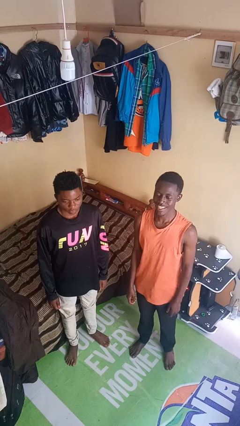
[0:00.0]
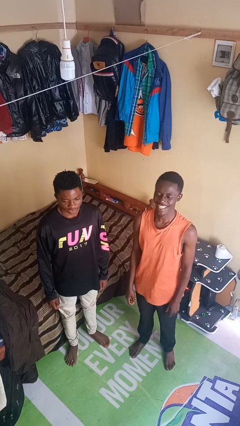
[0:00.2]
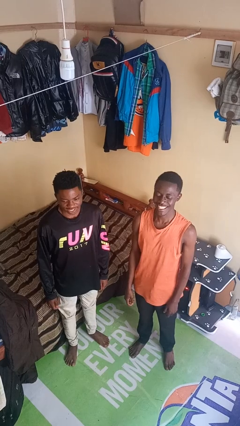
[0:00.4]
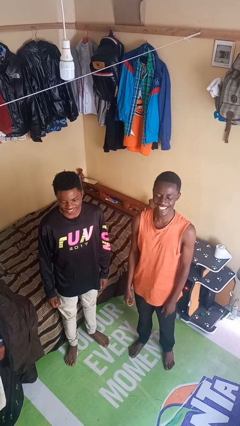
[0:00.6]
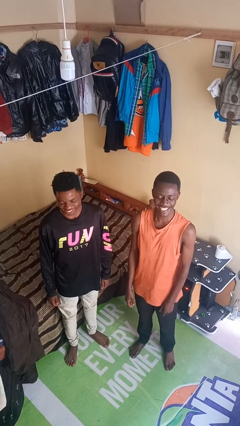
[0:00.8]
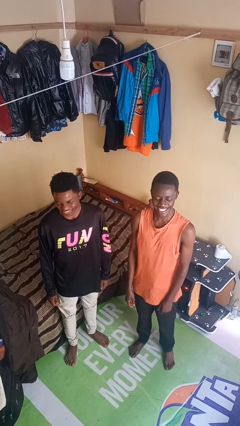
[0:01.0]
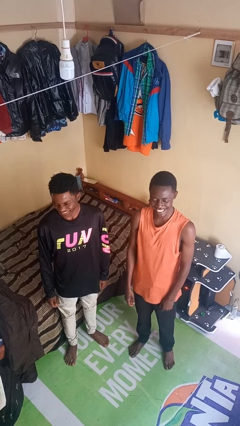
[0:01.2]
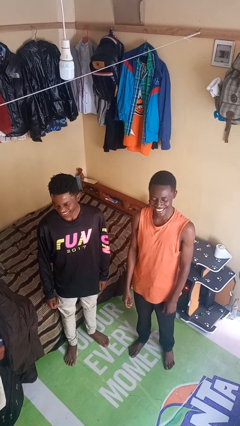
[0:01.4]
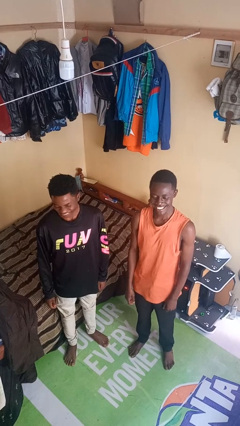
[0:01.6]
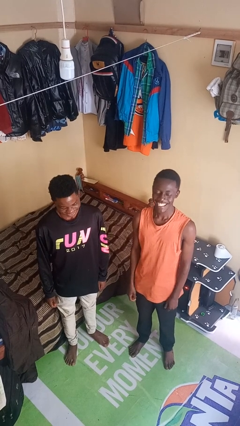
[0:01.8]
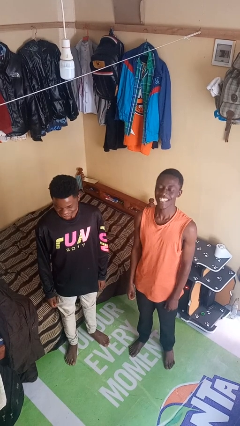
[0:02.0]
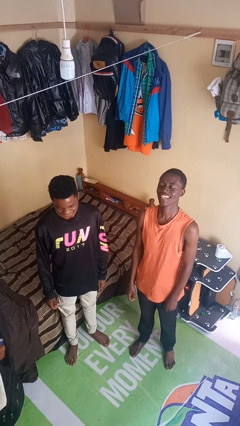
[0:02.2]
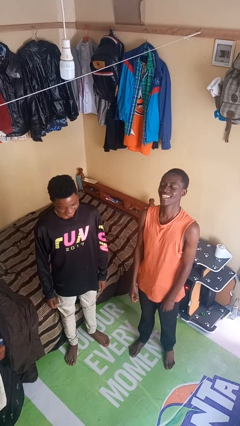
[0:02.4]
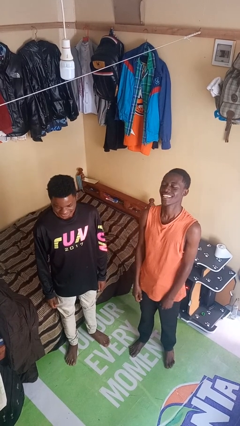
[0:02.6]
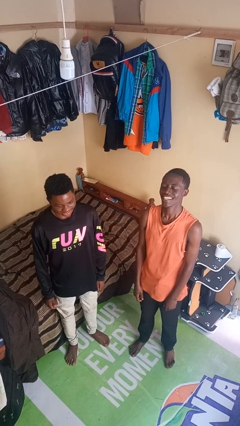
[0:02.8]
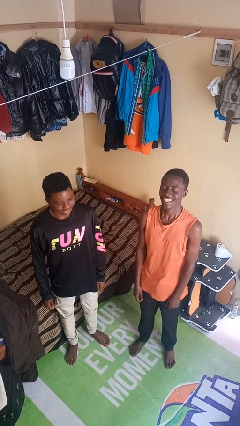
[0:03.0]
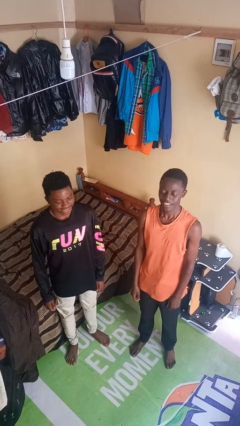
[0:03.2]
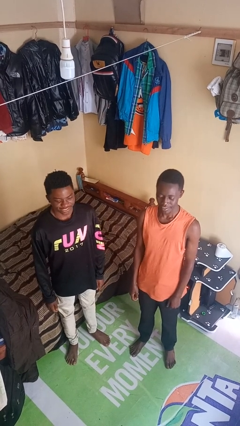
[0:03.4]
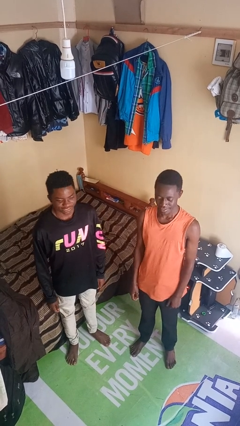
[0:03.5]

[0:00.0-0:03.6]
person laughs with person

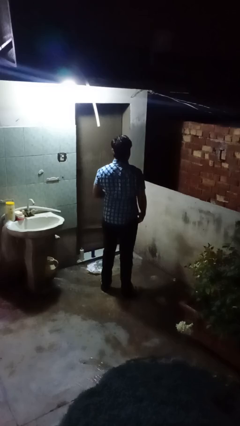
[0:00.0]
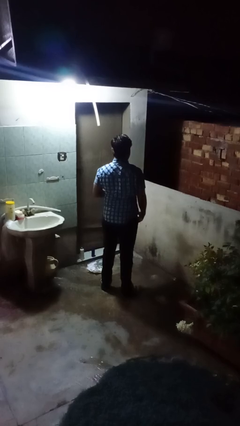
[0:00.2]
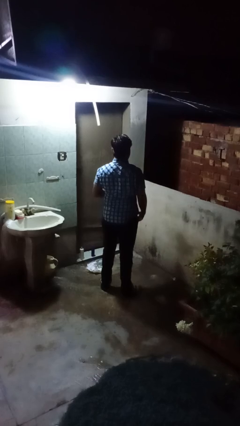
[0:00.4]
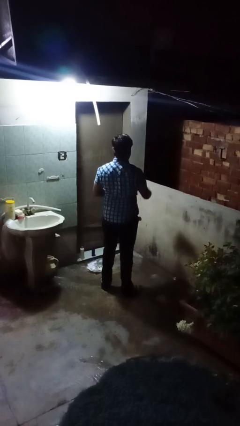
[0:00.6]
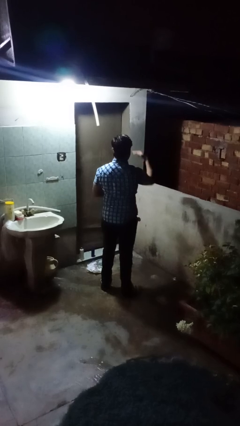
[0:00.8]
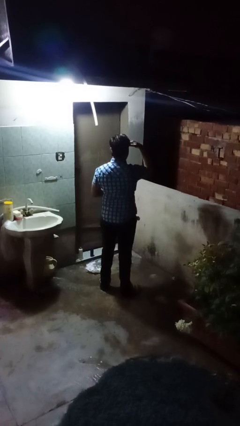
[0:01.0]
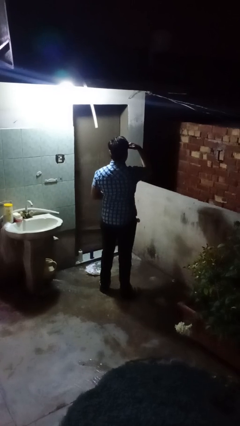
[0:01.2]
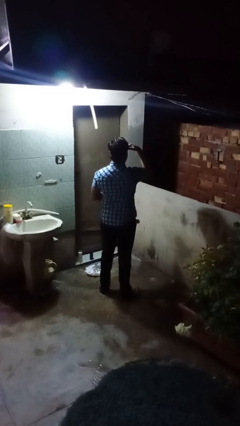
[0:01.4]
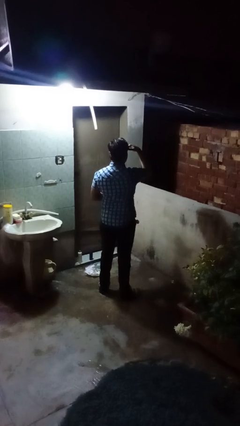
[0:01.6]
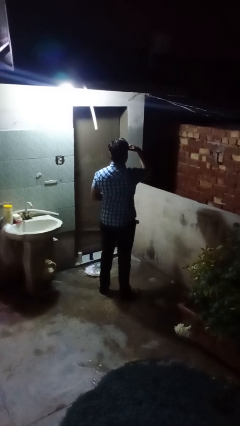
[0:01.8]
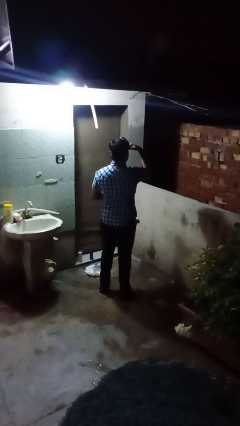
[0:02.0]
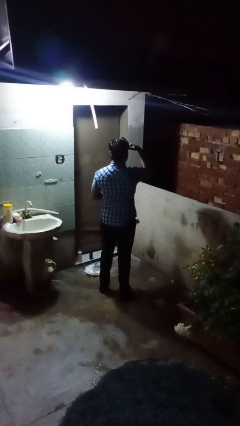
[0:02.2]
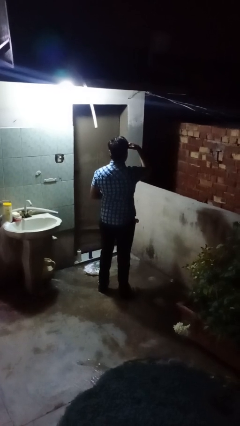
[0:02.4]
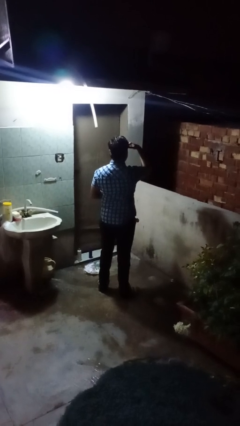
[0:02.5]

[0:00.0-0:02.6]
person shades eyes

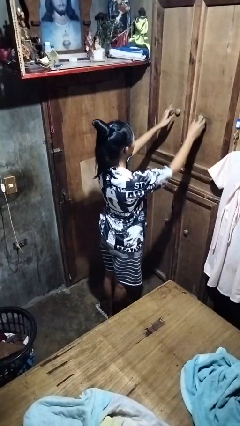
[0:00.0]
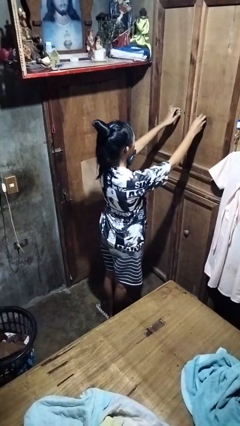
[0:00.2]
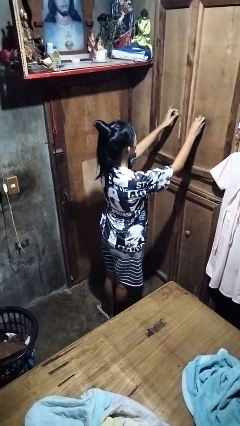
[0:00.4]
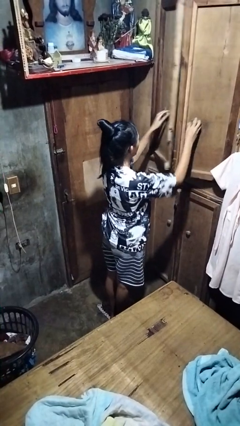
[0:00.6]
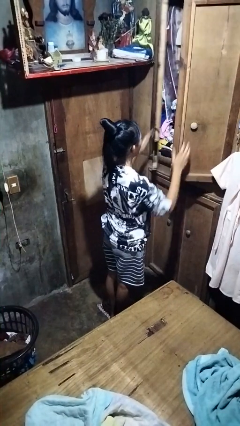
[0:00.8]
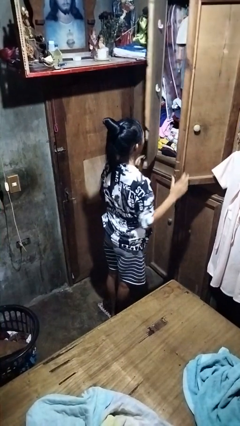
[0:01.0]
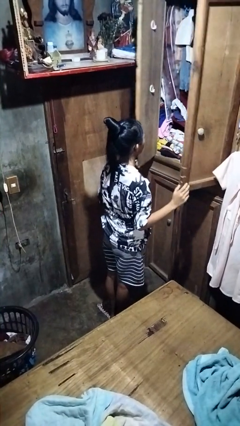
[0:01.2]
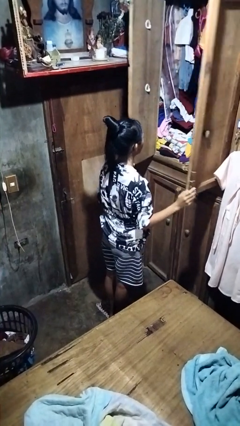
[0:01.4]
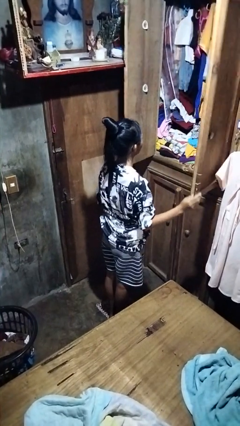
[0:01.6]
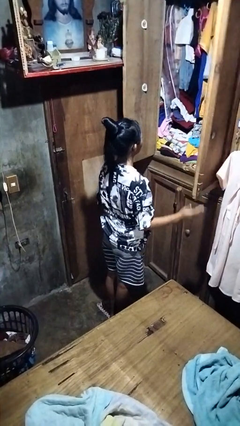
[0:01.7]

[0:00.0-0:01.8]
person opens closet door

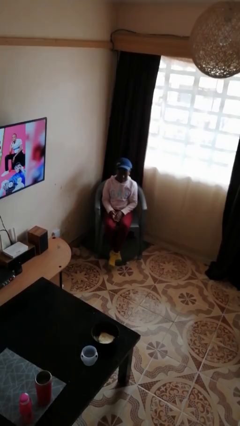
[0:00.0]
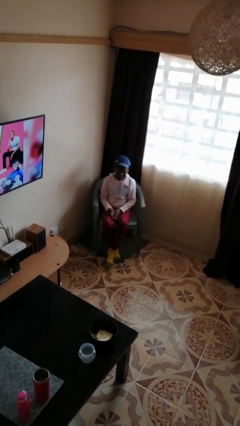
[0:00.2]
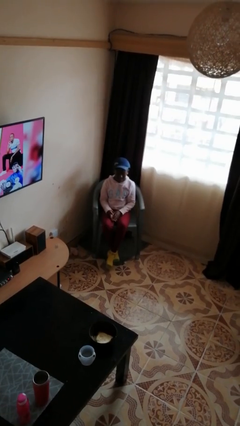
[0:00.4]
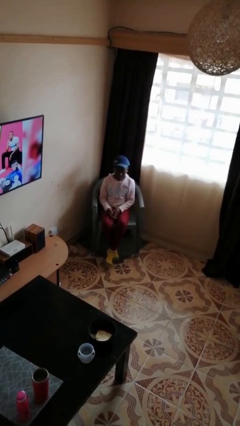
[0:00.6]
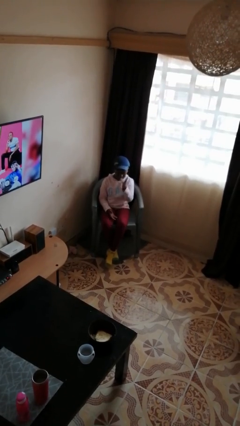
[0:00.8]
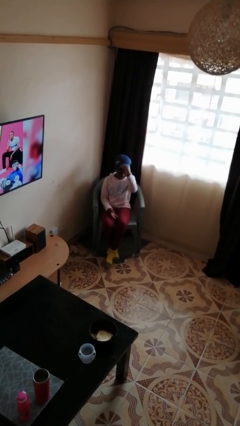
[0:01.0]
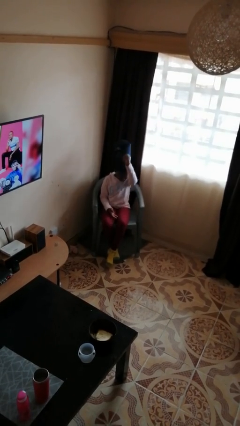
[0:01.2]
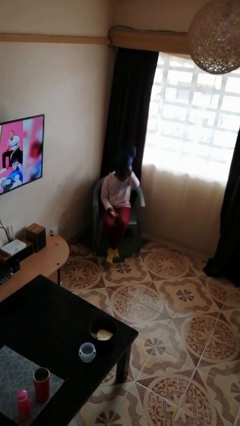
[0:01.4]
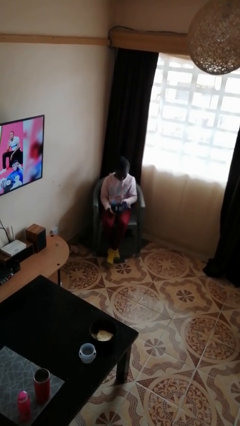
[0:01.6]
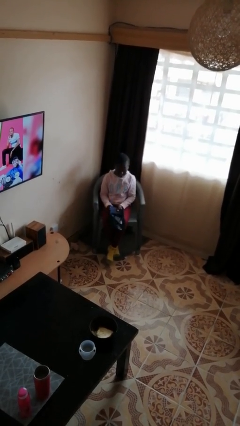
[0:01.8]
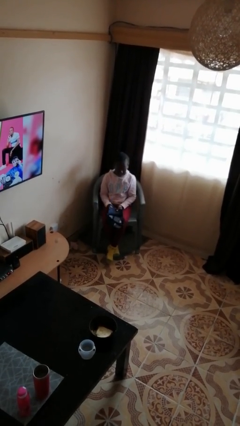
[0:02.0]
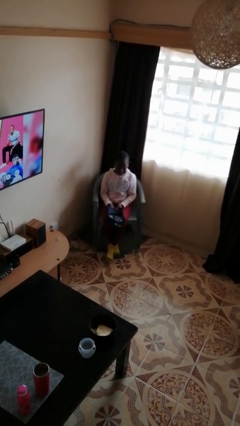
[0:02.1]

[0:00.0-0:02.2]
person takes off hat

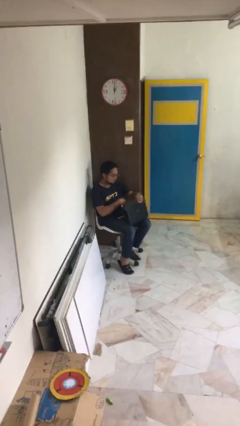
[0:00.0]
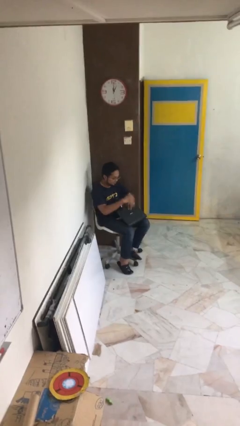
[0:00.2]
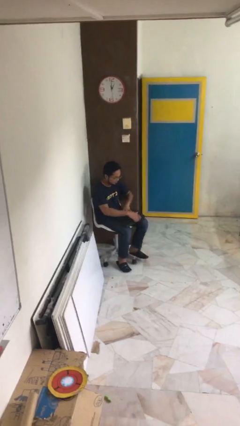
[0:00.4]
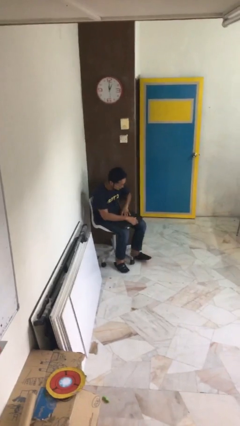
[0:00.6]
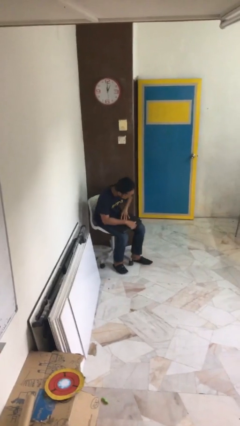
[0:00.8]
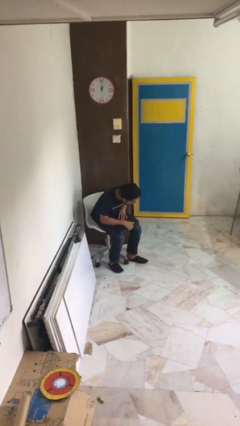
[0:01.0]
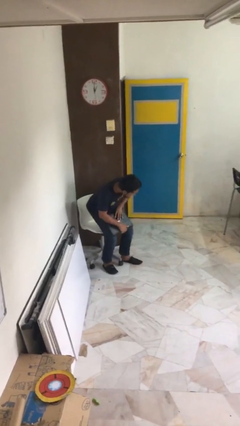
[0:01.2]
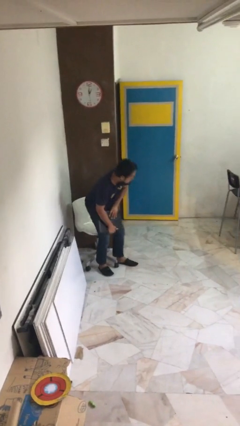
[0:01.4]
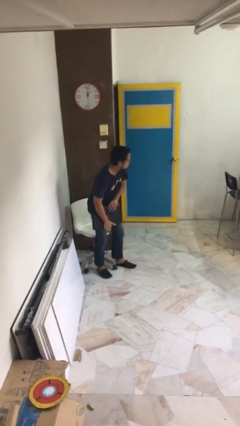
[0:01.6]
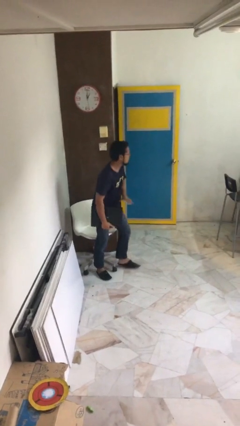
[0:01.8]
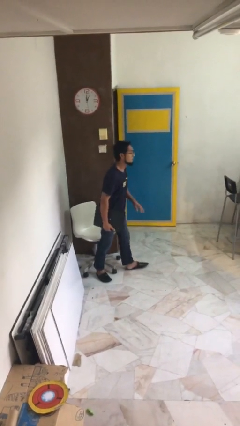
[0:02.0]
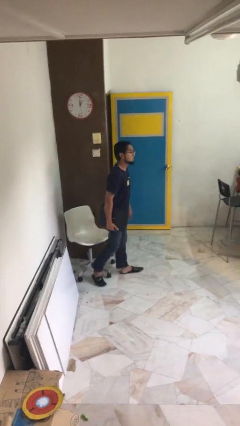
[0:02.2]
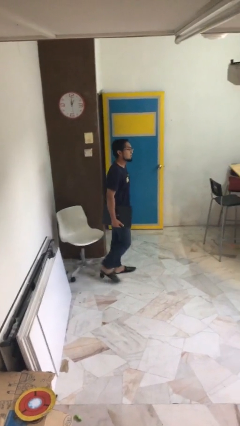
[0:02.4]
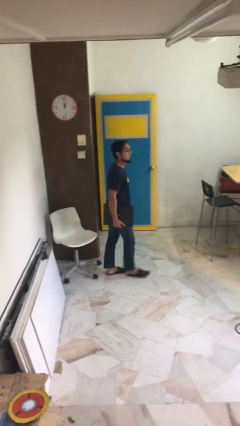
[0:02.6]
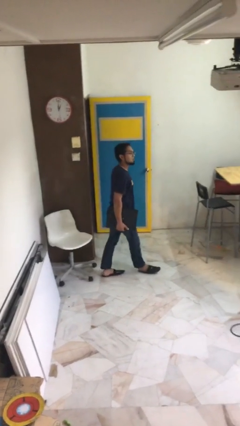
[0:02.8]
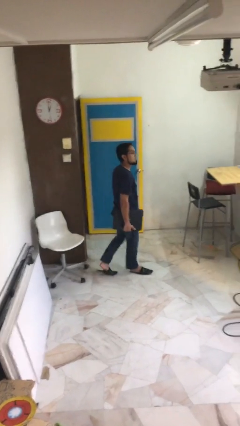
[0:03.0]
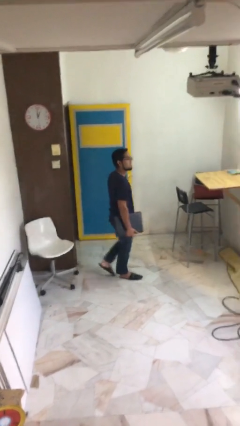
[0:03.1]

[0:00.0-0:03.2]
person stands up

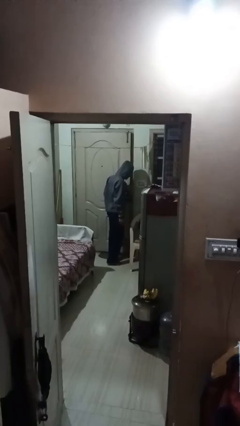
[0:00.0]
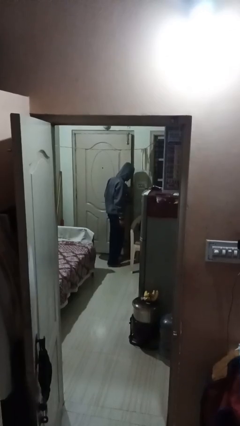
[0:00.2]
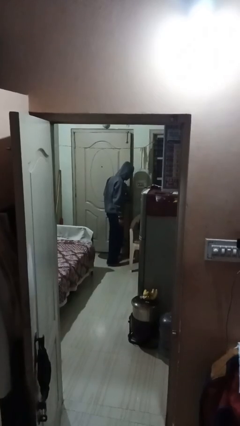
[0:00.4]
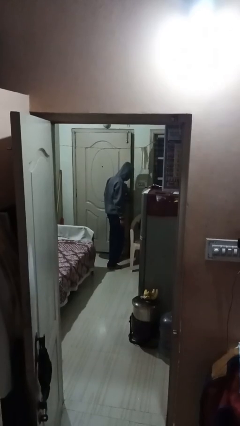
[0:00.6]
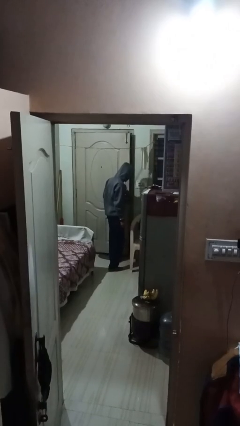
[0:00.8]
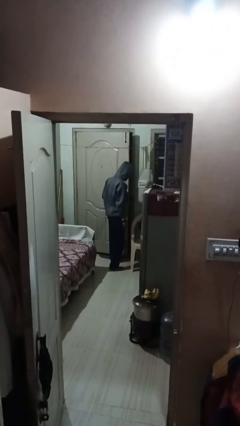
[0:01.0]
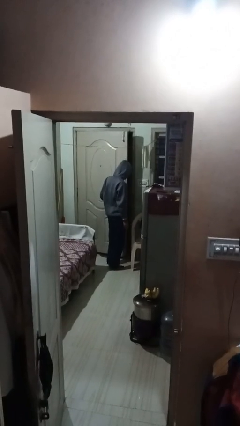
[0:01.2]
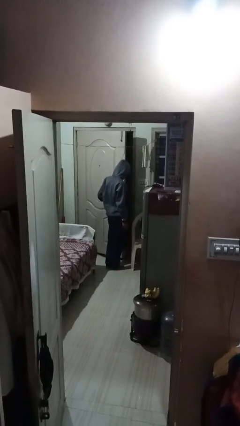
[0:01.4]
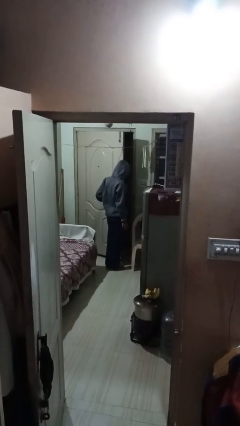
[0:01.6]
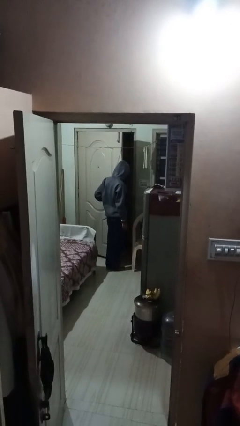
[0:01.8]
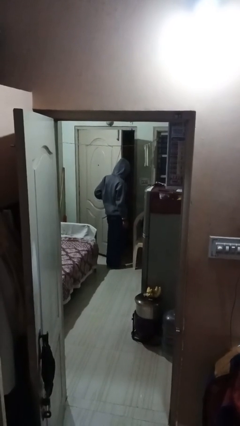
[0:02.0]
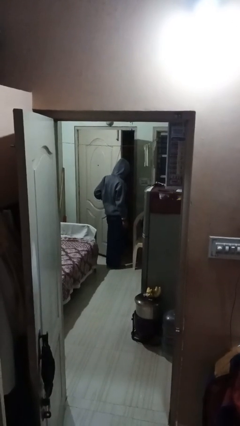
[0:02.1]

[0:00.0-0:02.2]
person opens facility door

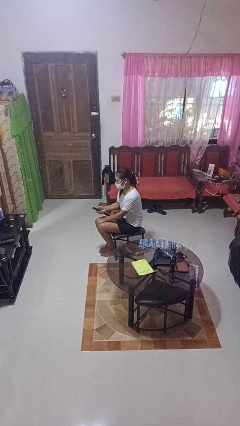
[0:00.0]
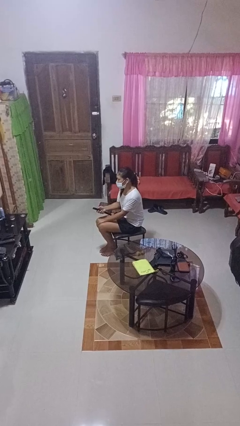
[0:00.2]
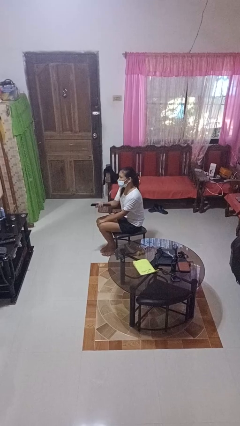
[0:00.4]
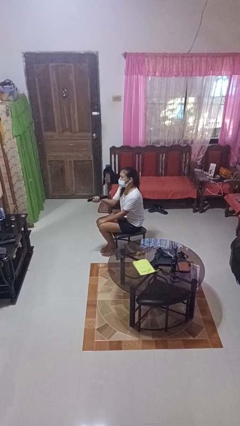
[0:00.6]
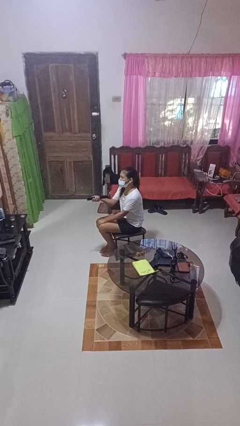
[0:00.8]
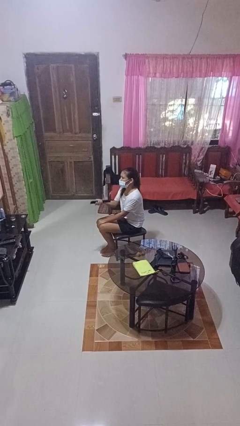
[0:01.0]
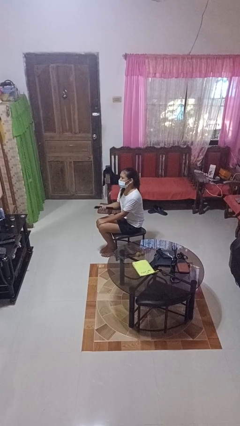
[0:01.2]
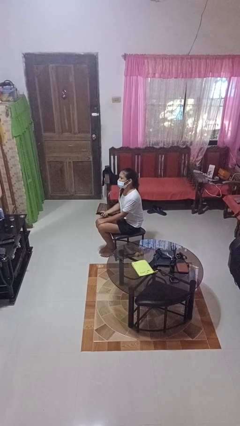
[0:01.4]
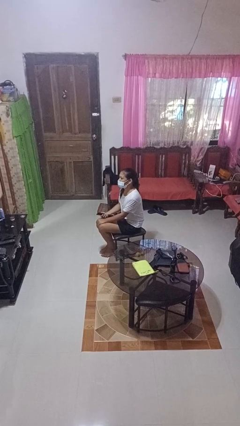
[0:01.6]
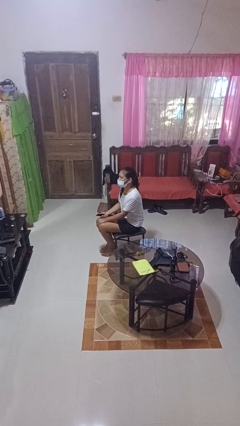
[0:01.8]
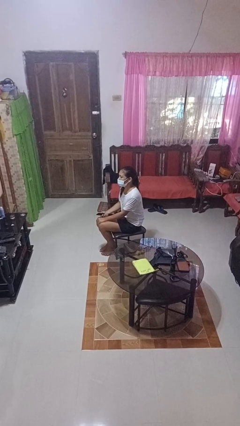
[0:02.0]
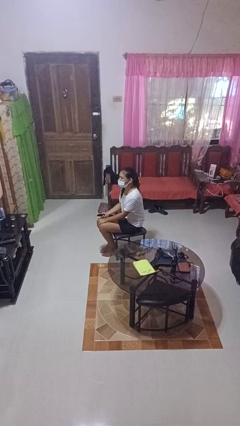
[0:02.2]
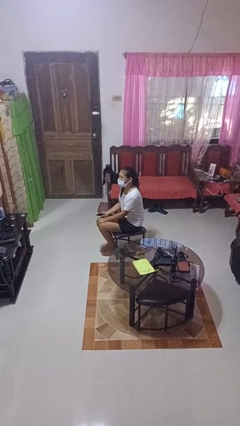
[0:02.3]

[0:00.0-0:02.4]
person uses television remote
